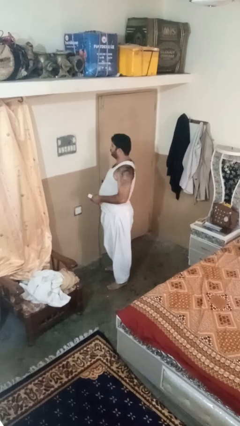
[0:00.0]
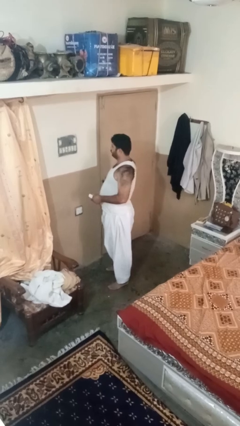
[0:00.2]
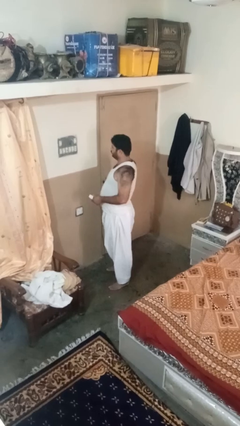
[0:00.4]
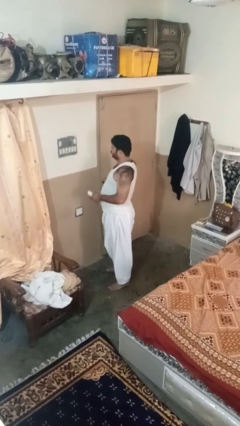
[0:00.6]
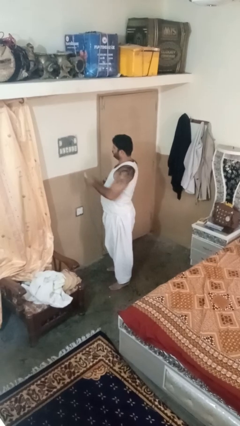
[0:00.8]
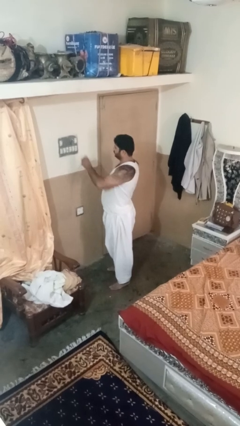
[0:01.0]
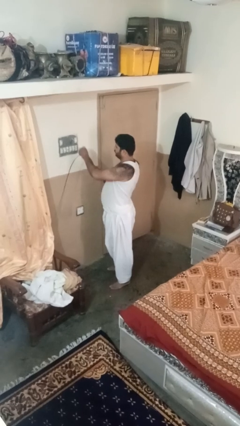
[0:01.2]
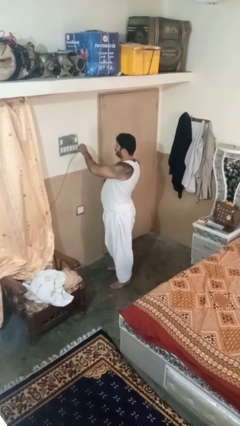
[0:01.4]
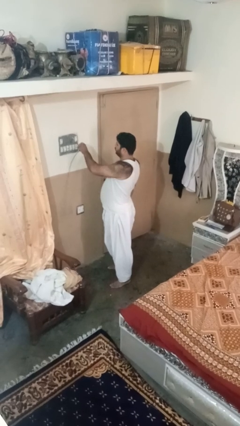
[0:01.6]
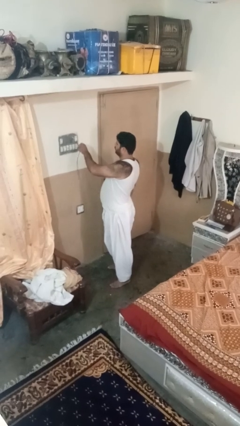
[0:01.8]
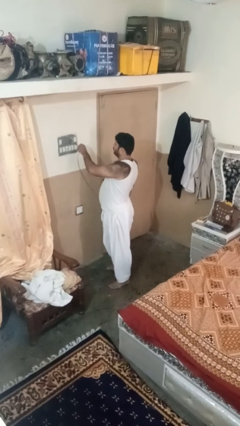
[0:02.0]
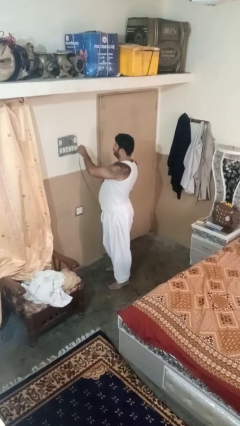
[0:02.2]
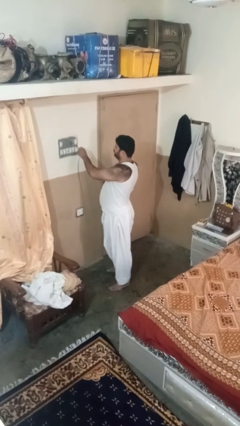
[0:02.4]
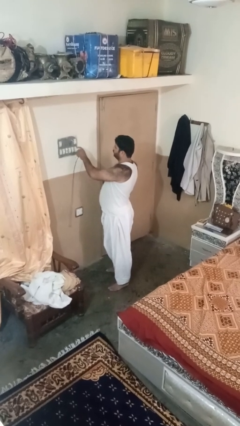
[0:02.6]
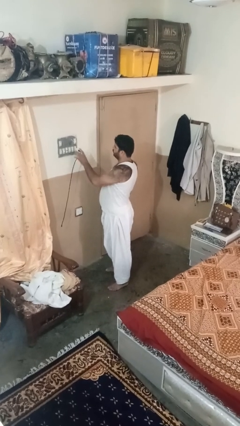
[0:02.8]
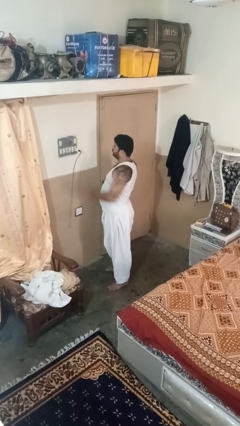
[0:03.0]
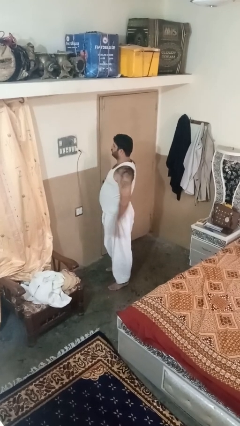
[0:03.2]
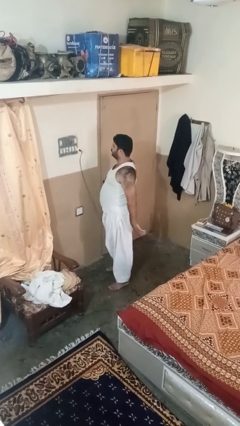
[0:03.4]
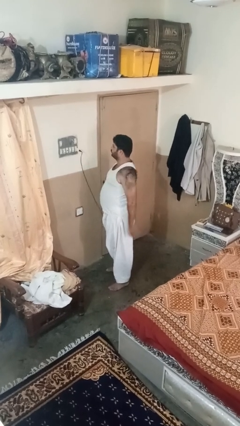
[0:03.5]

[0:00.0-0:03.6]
person plugs into electrical socket

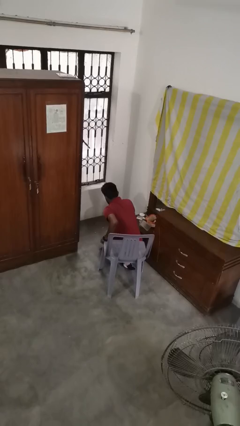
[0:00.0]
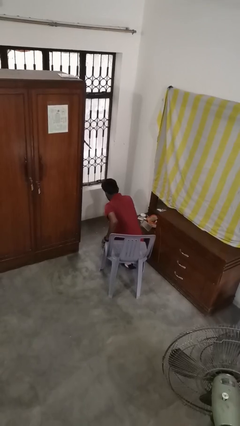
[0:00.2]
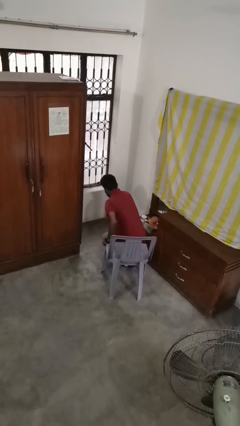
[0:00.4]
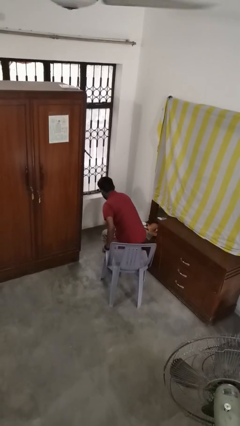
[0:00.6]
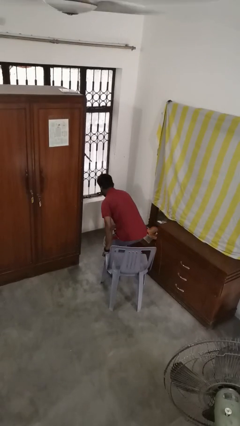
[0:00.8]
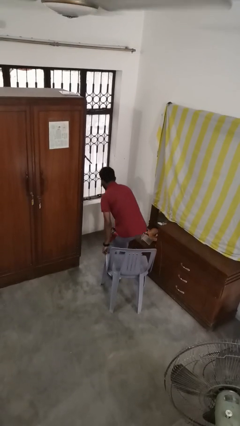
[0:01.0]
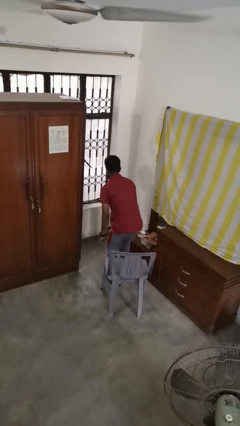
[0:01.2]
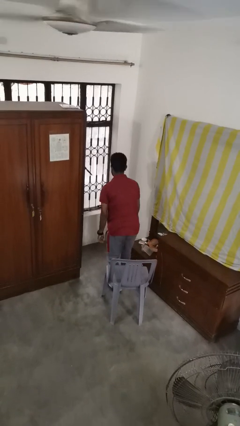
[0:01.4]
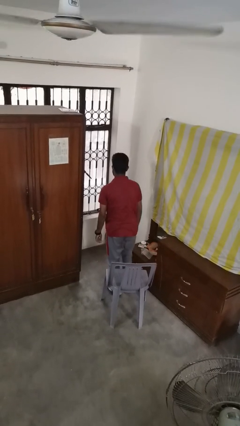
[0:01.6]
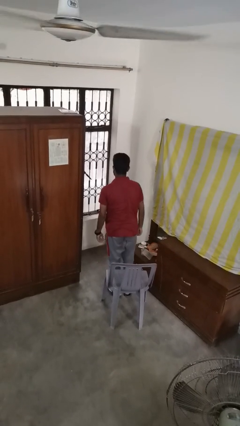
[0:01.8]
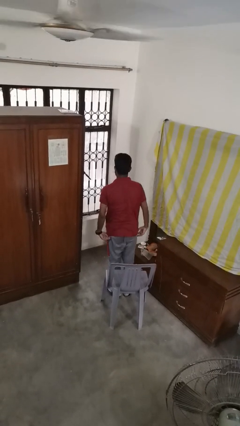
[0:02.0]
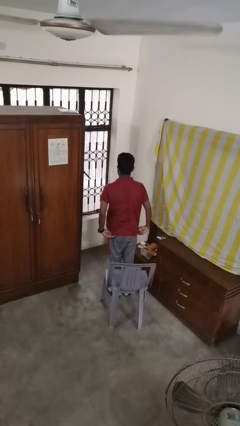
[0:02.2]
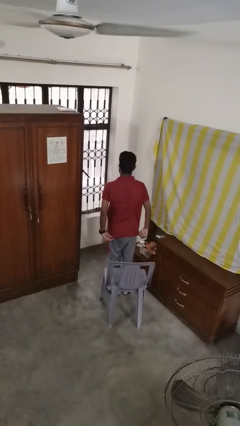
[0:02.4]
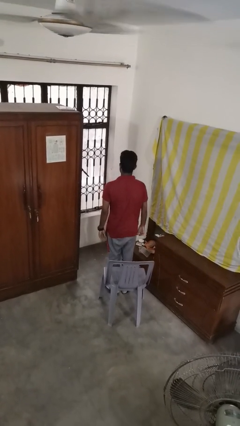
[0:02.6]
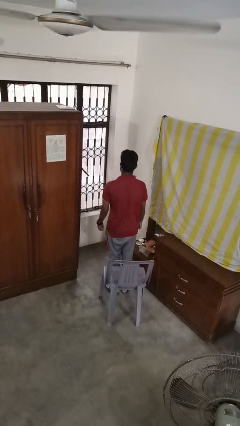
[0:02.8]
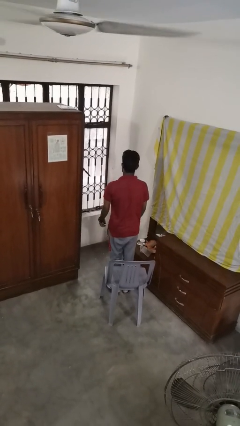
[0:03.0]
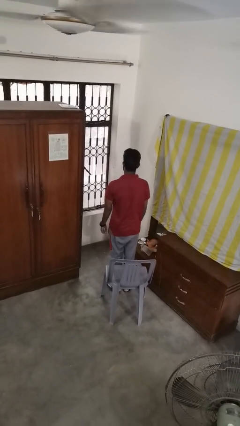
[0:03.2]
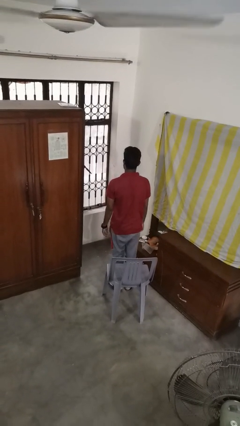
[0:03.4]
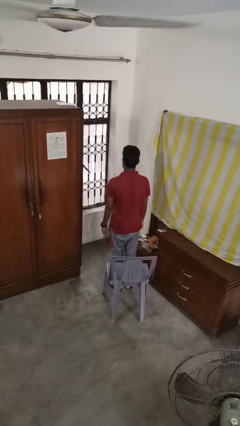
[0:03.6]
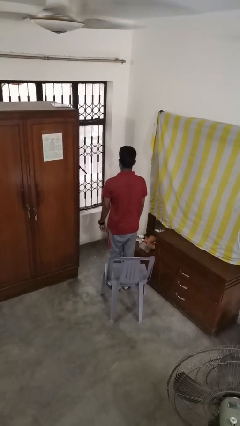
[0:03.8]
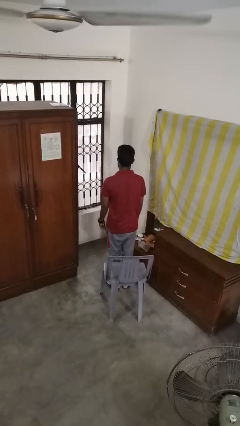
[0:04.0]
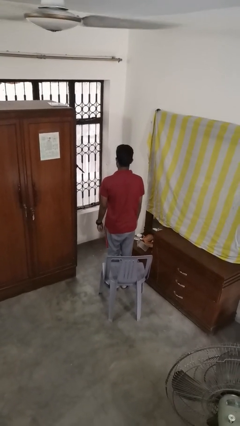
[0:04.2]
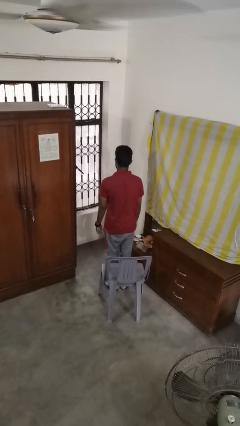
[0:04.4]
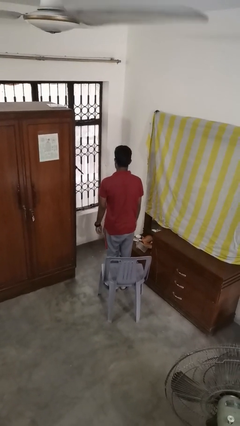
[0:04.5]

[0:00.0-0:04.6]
person stands up from floor

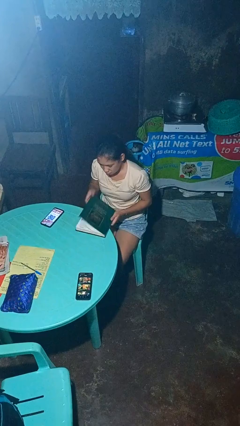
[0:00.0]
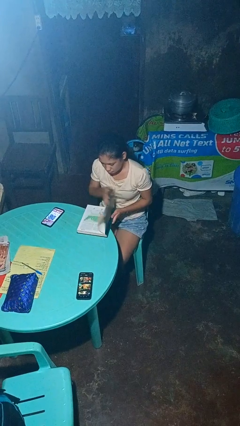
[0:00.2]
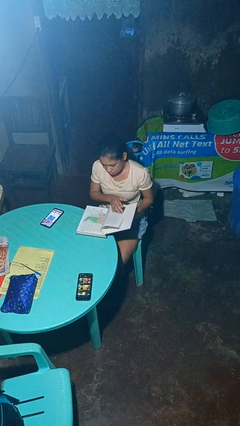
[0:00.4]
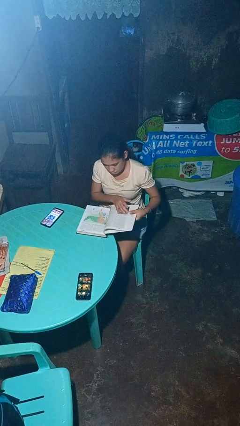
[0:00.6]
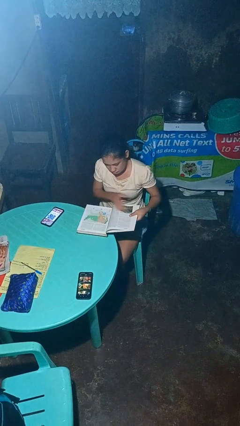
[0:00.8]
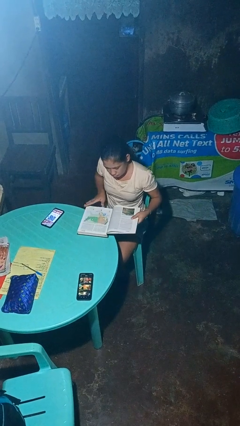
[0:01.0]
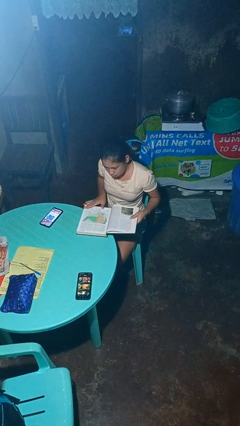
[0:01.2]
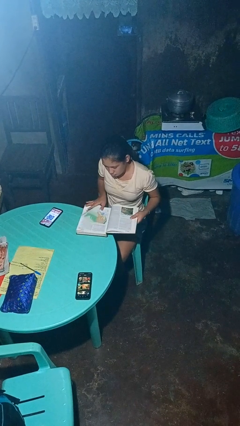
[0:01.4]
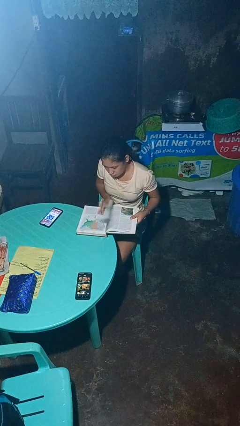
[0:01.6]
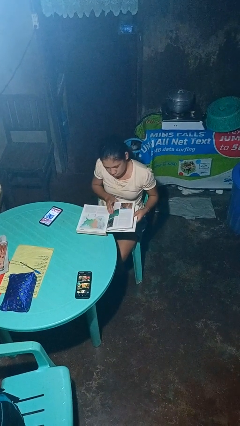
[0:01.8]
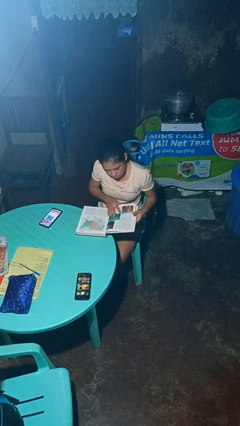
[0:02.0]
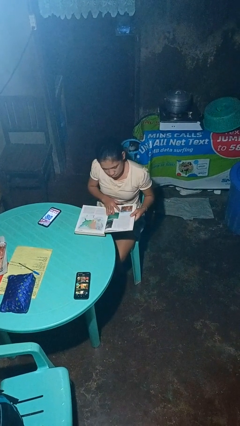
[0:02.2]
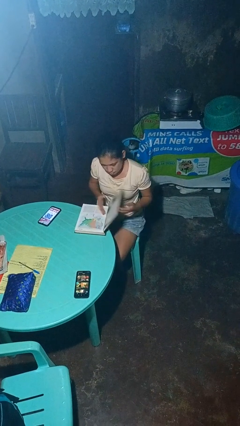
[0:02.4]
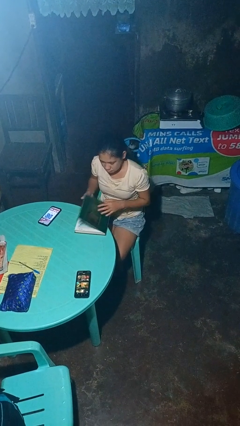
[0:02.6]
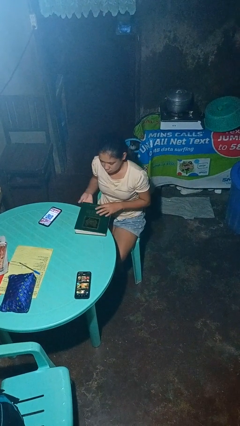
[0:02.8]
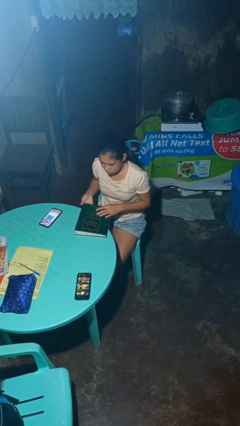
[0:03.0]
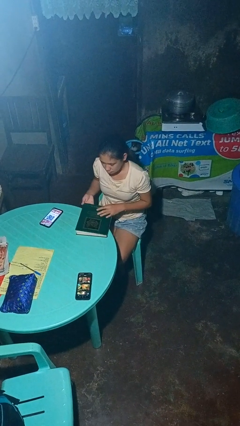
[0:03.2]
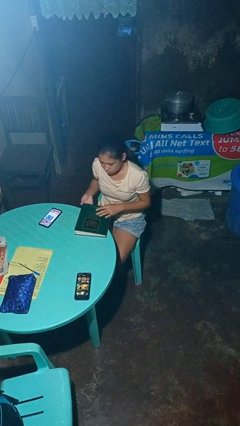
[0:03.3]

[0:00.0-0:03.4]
person reads book

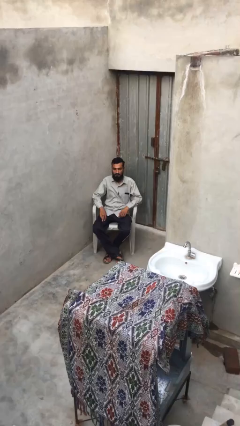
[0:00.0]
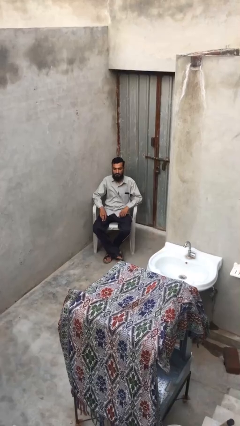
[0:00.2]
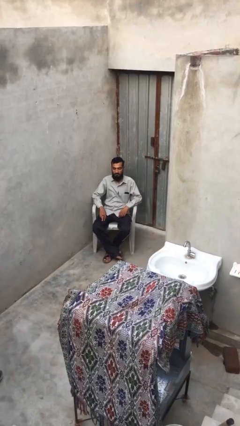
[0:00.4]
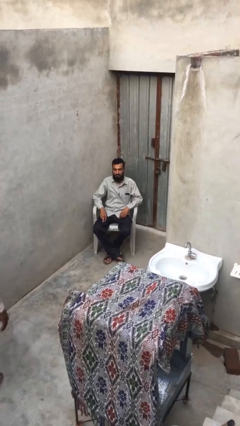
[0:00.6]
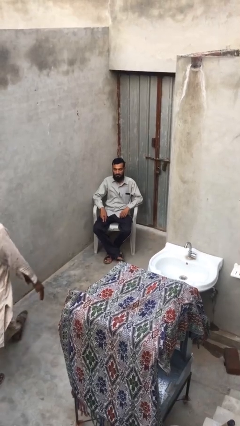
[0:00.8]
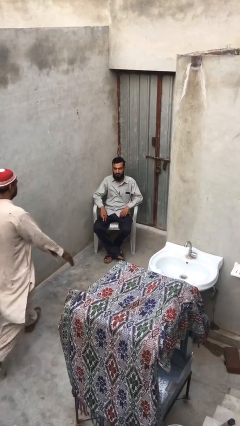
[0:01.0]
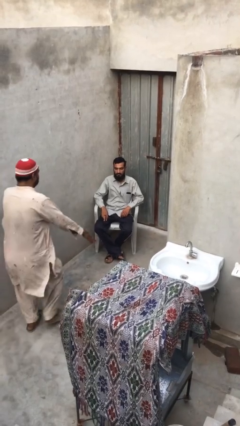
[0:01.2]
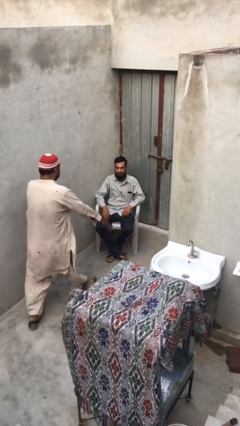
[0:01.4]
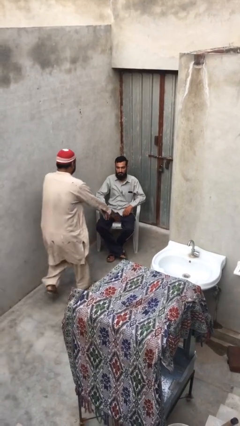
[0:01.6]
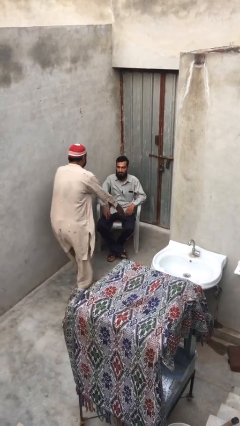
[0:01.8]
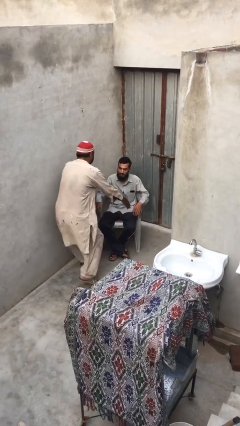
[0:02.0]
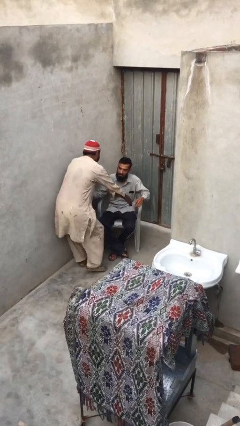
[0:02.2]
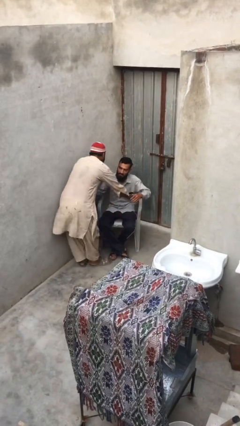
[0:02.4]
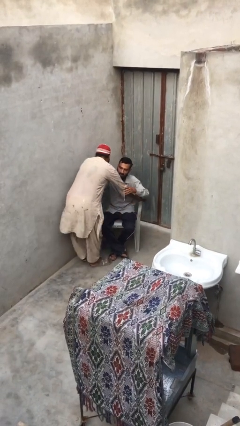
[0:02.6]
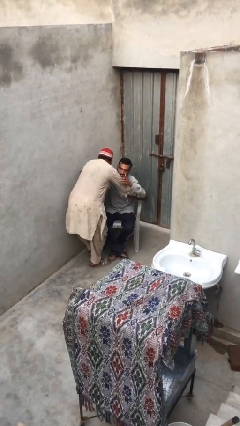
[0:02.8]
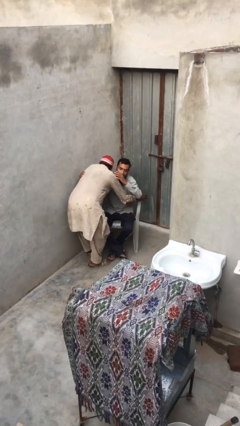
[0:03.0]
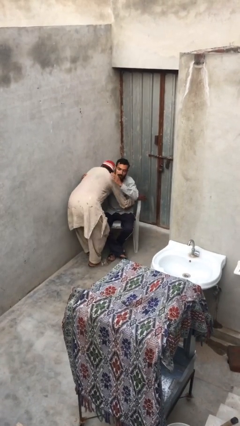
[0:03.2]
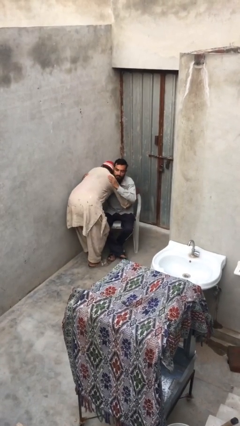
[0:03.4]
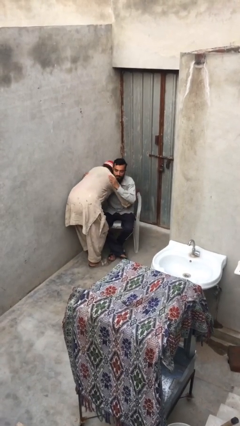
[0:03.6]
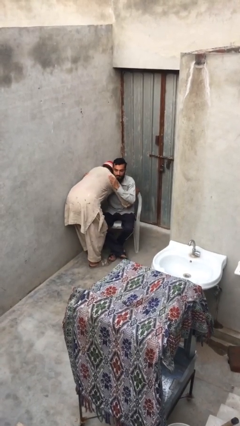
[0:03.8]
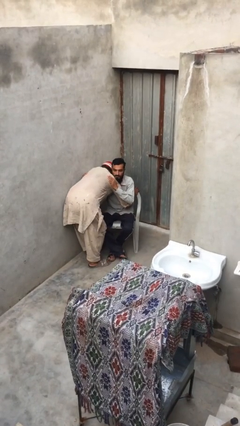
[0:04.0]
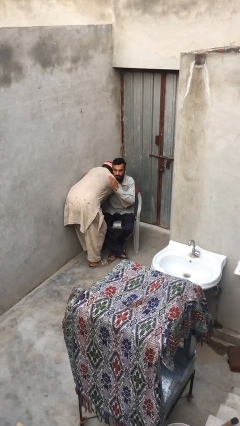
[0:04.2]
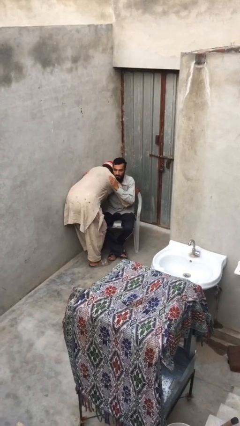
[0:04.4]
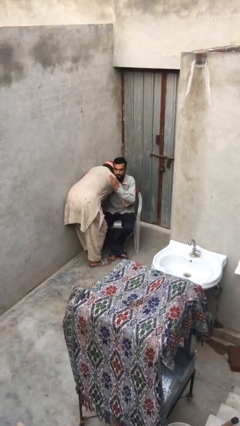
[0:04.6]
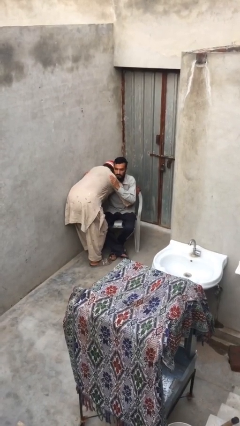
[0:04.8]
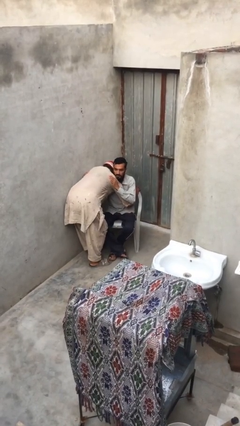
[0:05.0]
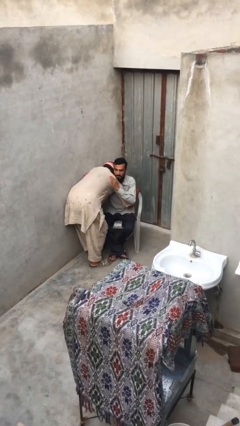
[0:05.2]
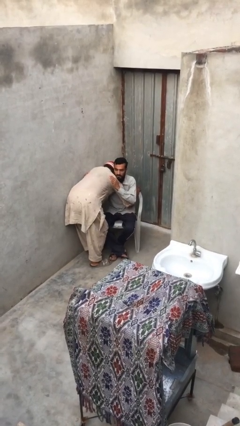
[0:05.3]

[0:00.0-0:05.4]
person embraces person

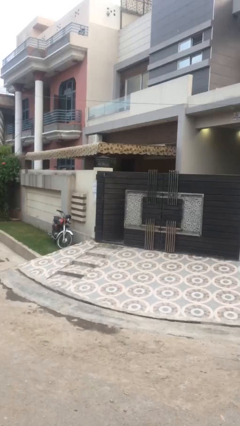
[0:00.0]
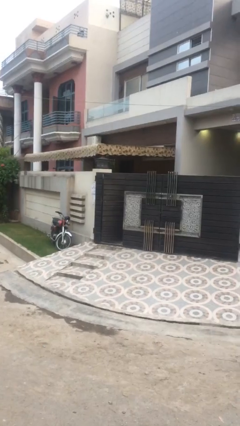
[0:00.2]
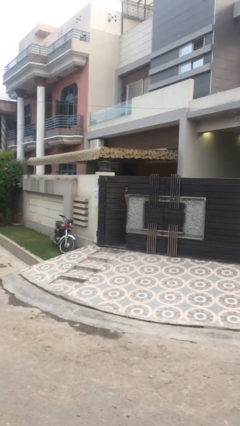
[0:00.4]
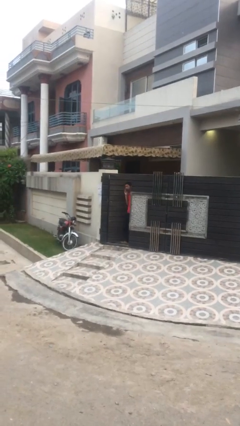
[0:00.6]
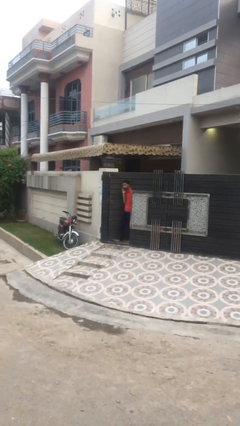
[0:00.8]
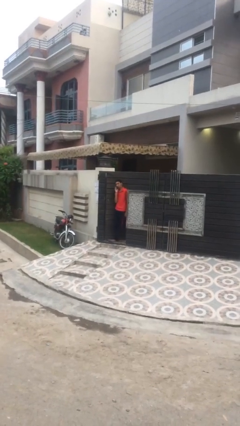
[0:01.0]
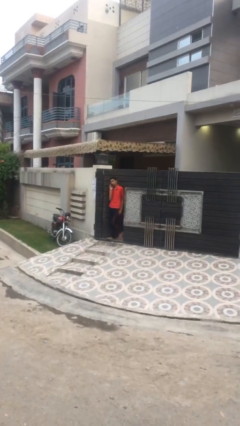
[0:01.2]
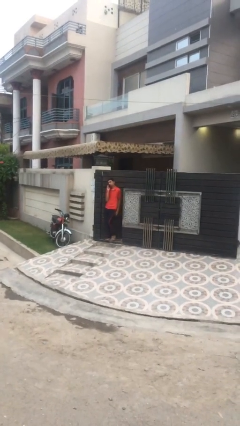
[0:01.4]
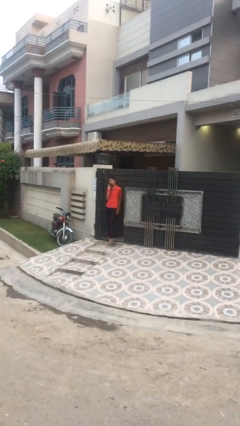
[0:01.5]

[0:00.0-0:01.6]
person enters scene through structure
